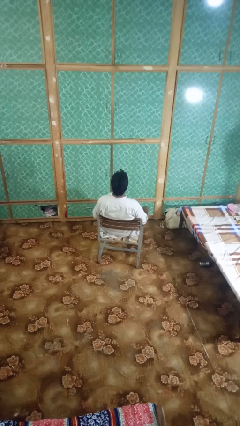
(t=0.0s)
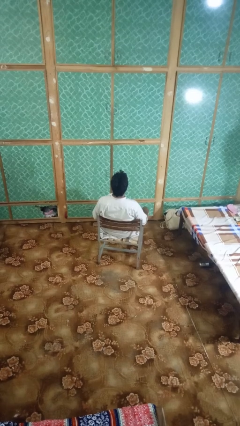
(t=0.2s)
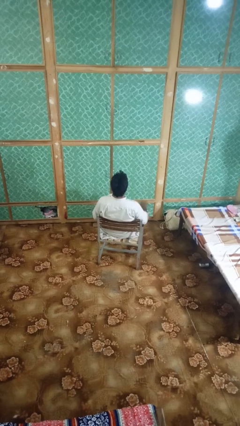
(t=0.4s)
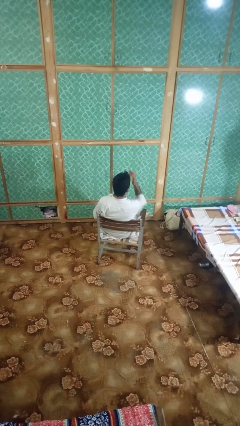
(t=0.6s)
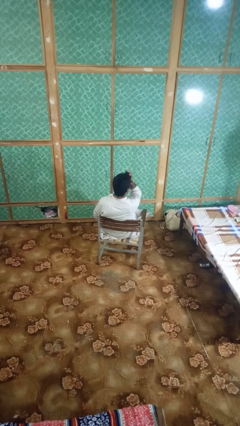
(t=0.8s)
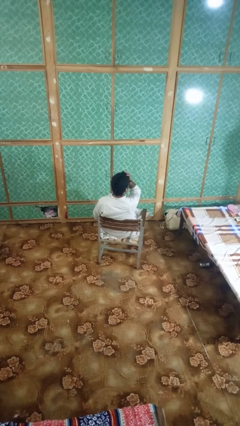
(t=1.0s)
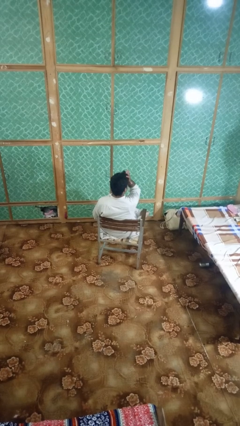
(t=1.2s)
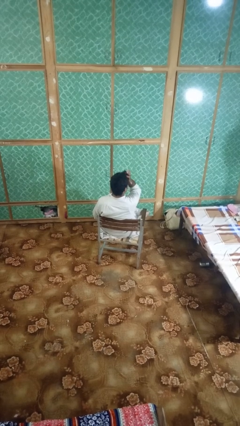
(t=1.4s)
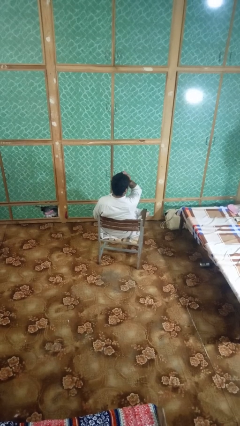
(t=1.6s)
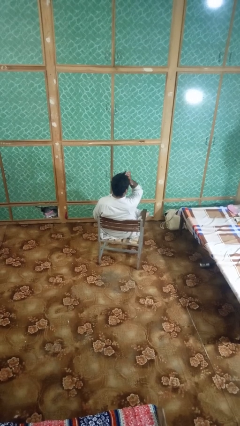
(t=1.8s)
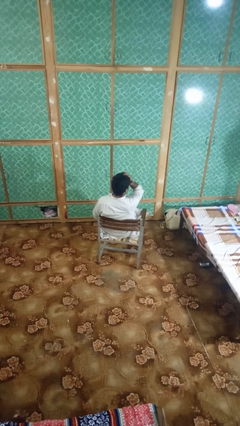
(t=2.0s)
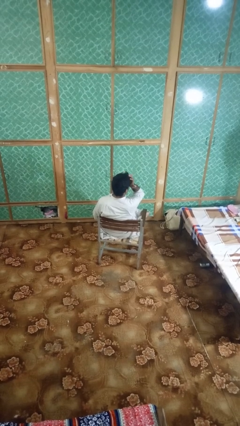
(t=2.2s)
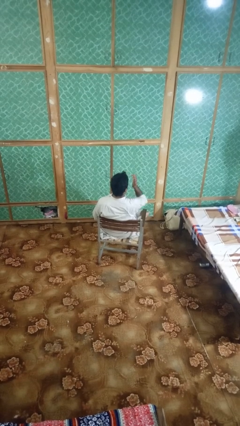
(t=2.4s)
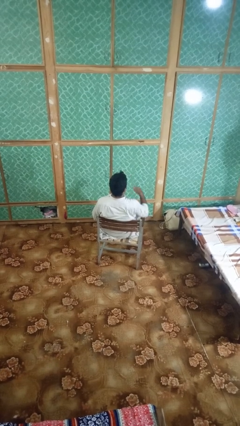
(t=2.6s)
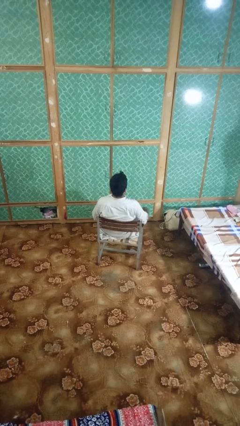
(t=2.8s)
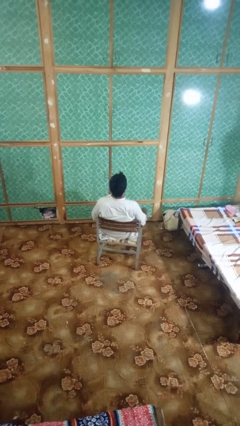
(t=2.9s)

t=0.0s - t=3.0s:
person rubs eyes

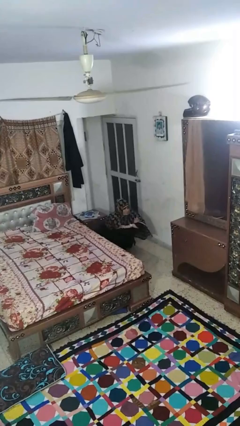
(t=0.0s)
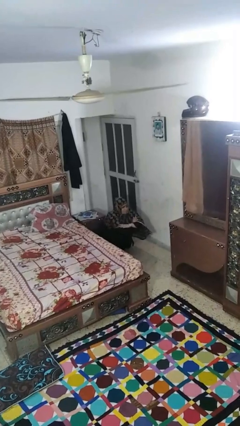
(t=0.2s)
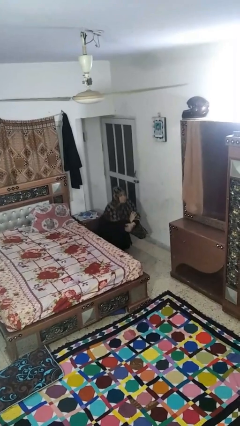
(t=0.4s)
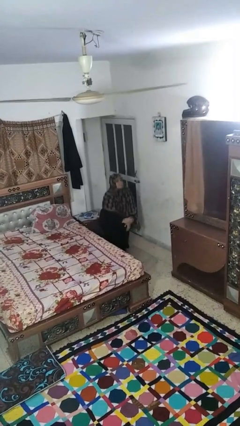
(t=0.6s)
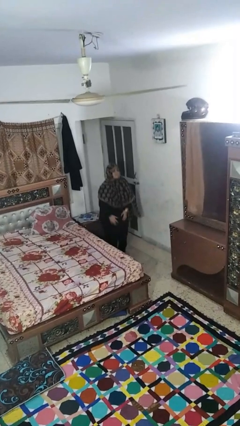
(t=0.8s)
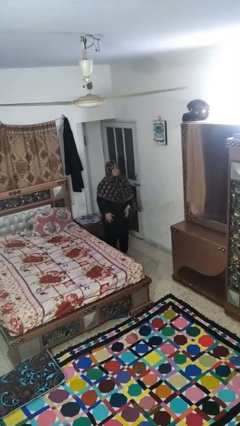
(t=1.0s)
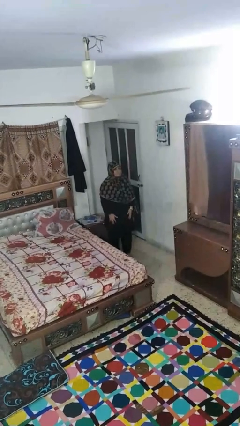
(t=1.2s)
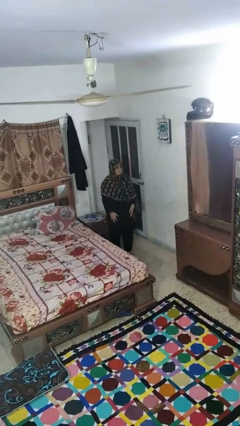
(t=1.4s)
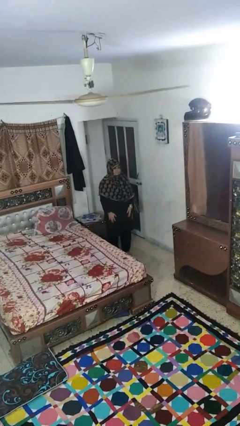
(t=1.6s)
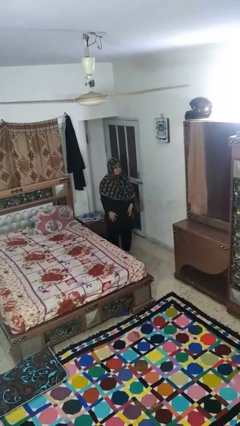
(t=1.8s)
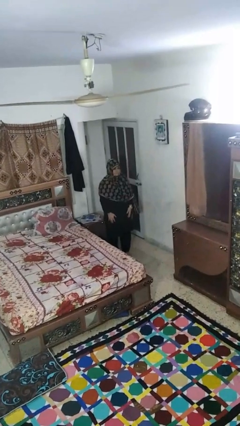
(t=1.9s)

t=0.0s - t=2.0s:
person stands up

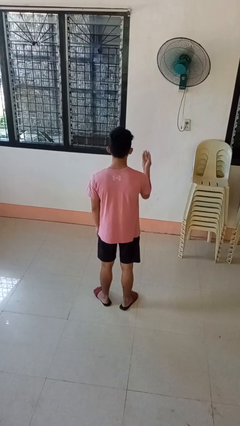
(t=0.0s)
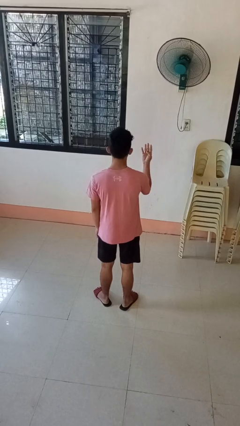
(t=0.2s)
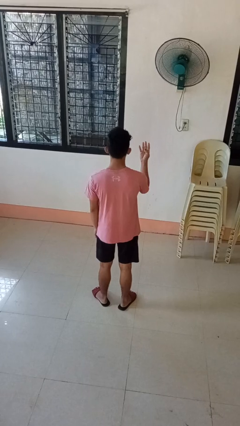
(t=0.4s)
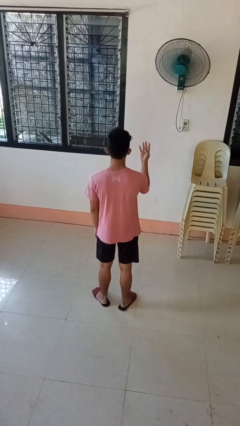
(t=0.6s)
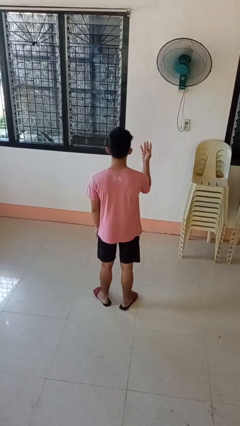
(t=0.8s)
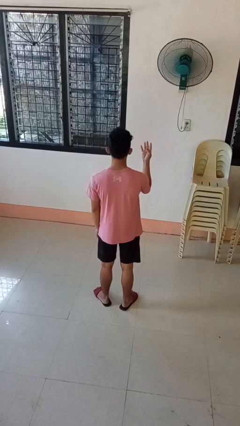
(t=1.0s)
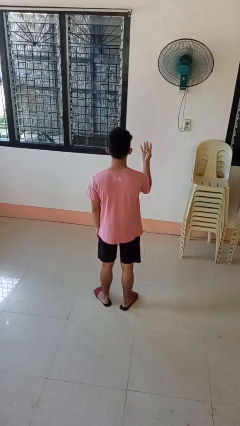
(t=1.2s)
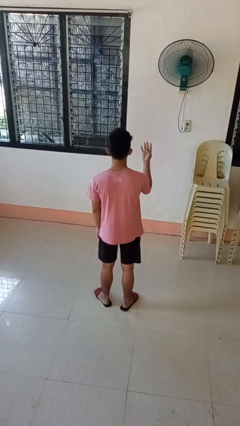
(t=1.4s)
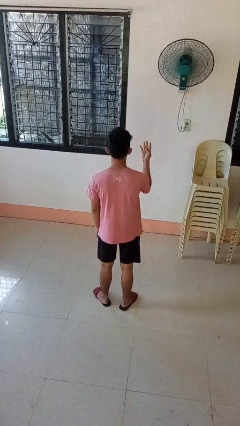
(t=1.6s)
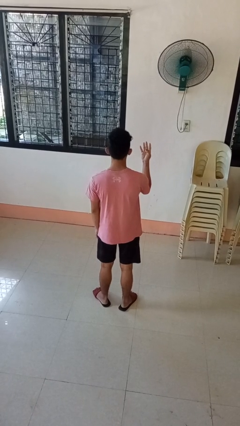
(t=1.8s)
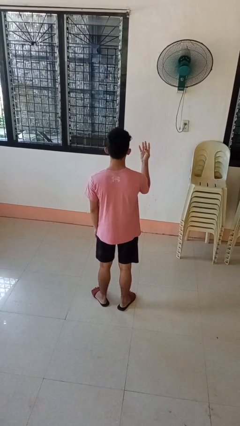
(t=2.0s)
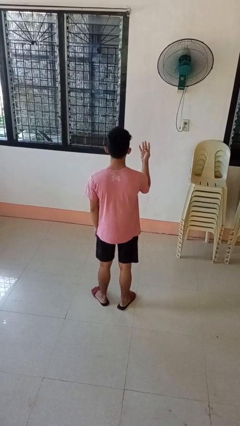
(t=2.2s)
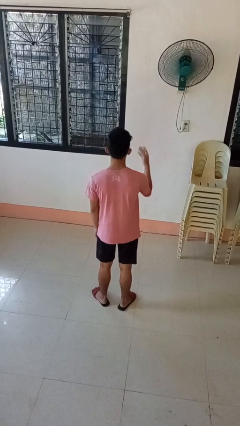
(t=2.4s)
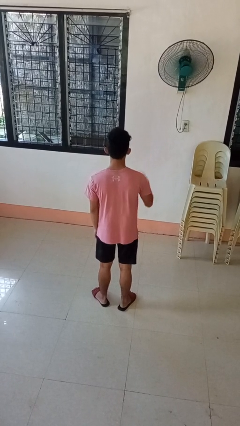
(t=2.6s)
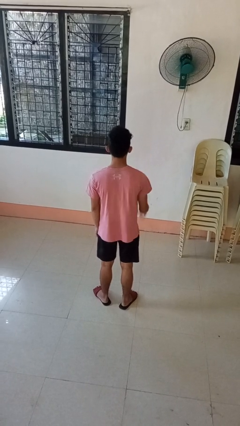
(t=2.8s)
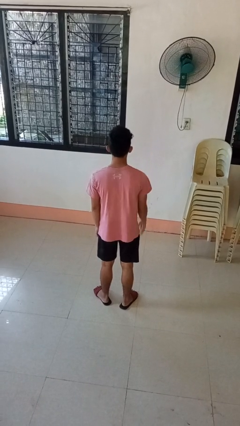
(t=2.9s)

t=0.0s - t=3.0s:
person gestures number four

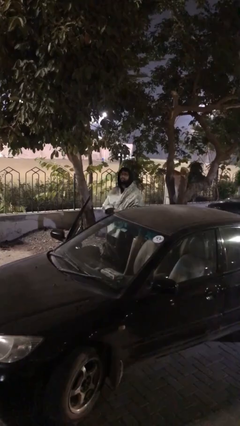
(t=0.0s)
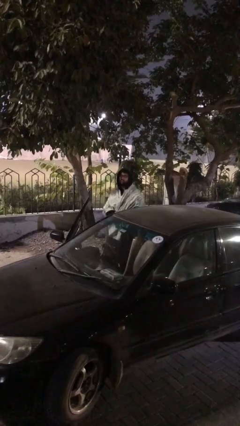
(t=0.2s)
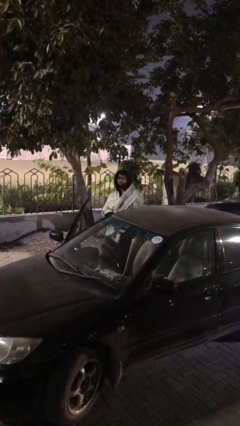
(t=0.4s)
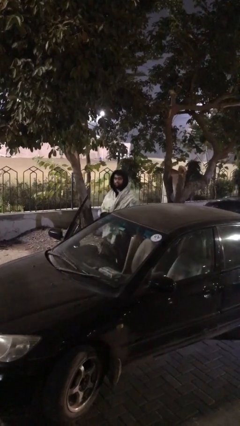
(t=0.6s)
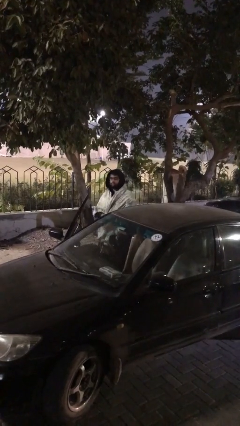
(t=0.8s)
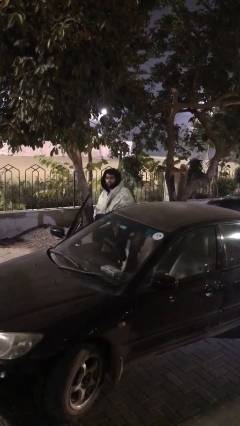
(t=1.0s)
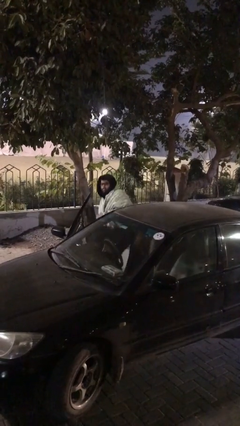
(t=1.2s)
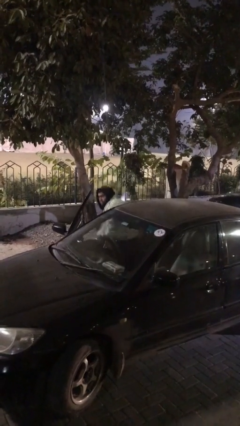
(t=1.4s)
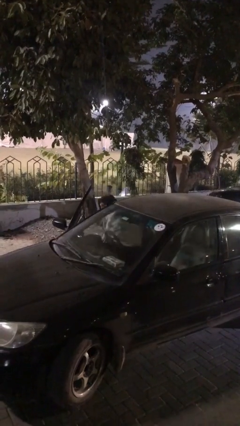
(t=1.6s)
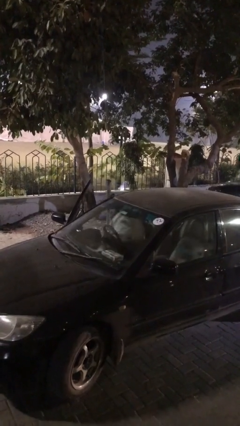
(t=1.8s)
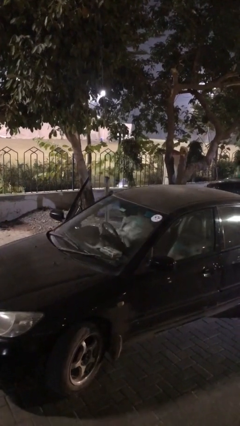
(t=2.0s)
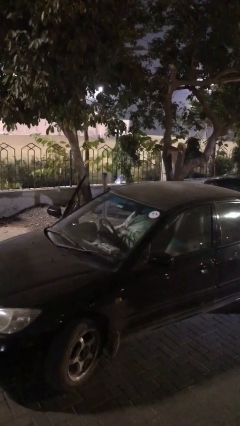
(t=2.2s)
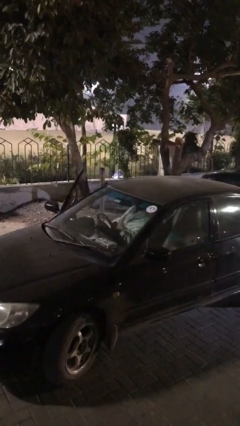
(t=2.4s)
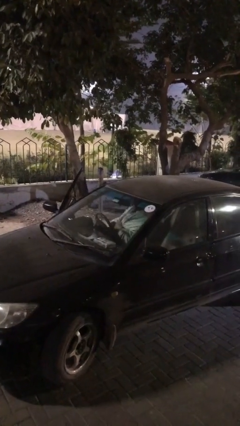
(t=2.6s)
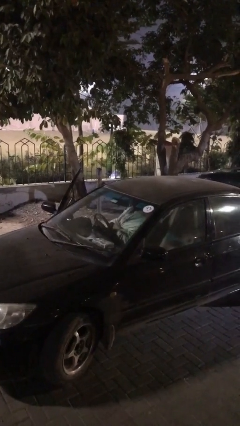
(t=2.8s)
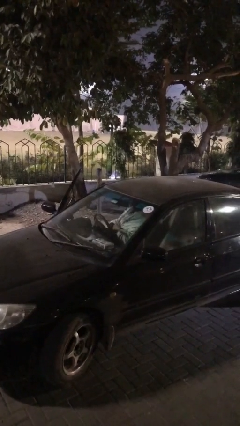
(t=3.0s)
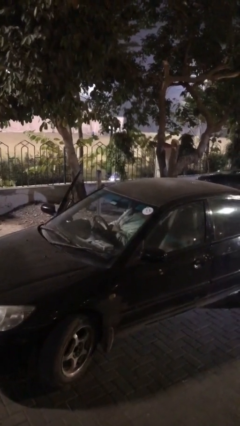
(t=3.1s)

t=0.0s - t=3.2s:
person enters car

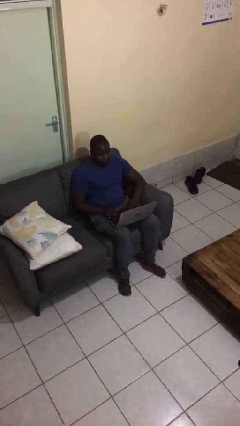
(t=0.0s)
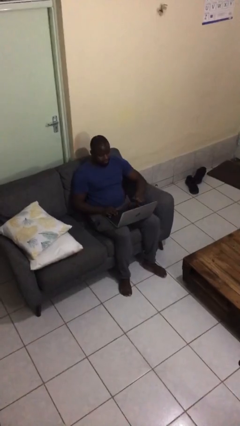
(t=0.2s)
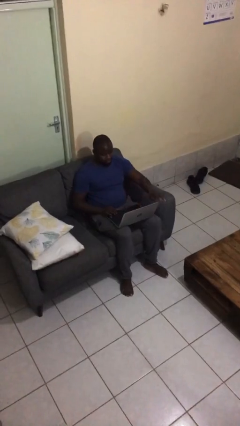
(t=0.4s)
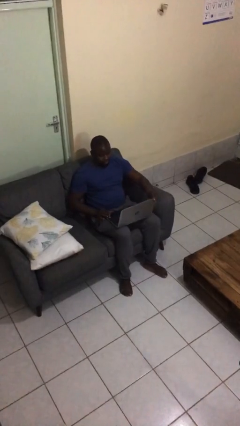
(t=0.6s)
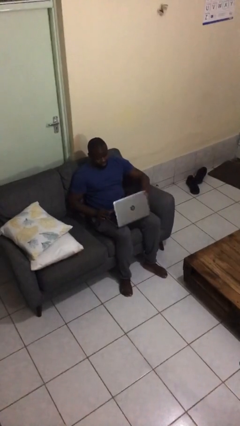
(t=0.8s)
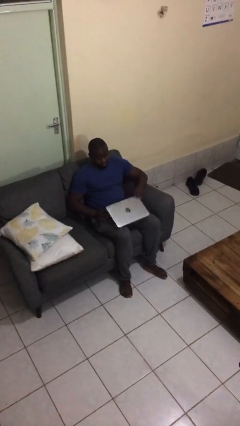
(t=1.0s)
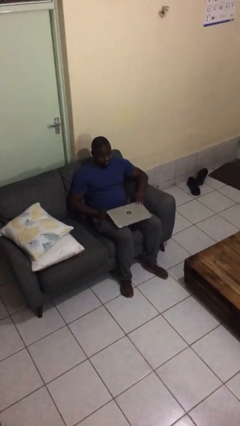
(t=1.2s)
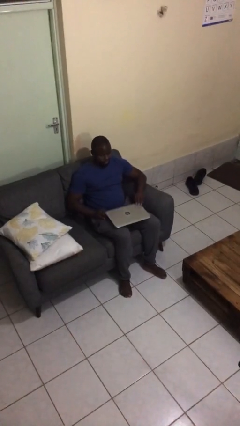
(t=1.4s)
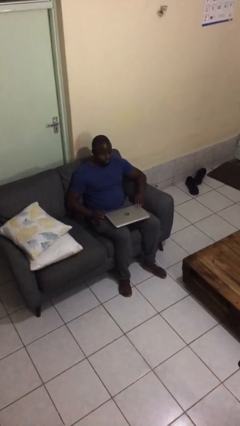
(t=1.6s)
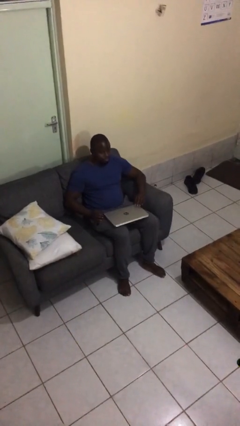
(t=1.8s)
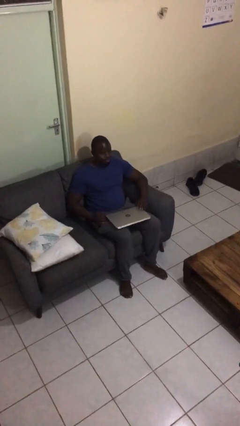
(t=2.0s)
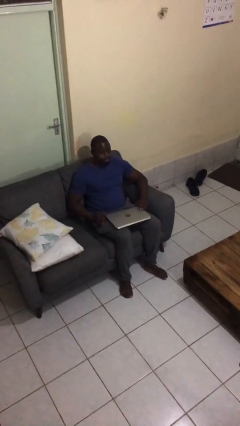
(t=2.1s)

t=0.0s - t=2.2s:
person closes laptop

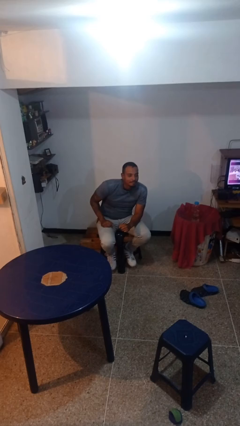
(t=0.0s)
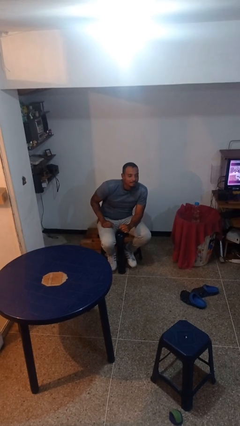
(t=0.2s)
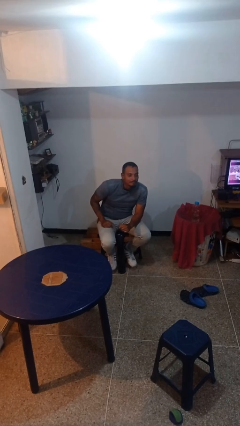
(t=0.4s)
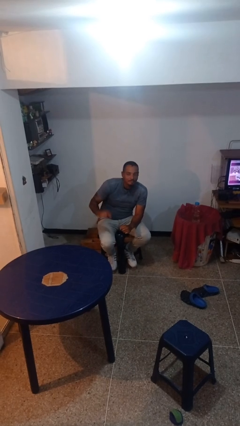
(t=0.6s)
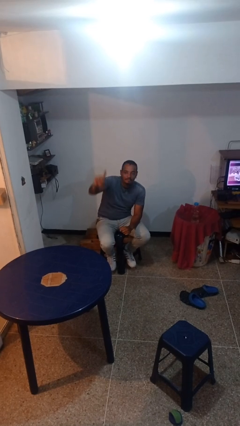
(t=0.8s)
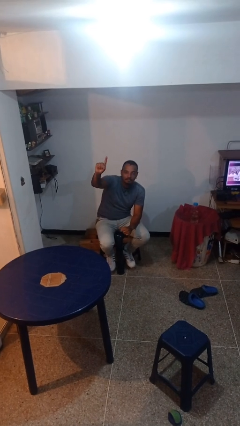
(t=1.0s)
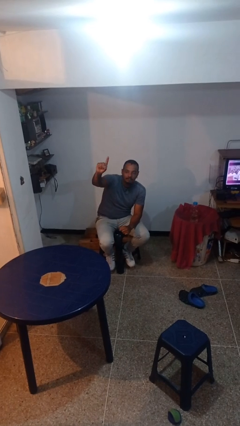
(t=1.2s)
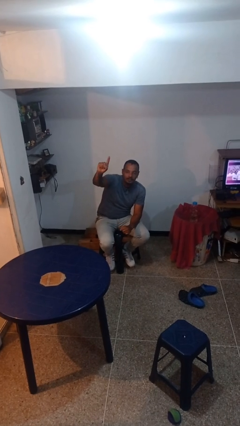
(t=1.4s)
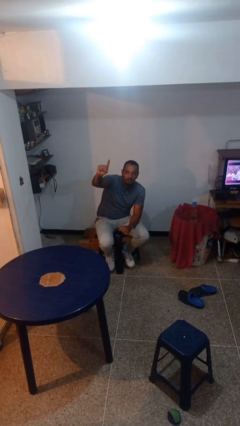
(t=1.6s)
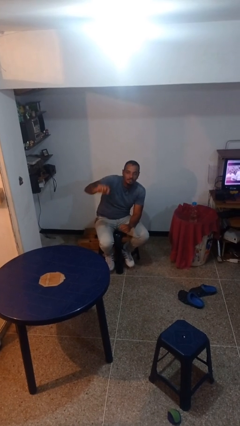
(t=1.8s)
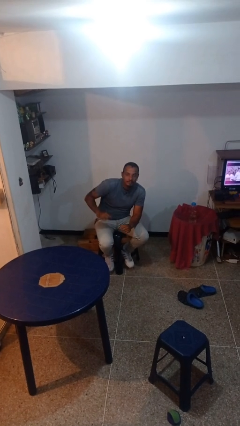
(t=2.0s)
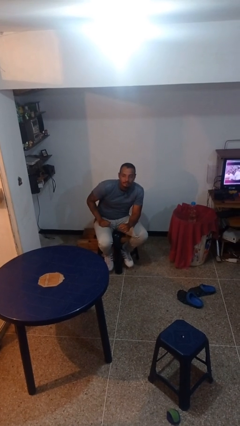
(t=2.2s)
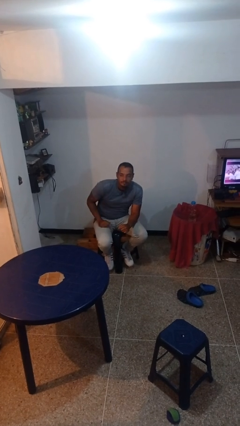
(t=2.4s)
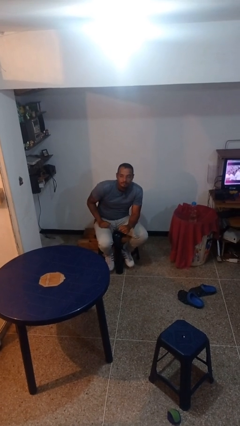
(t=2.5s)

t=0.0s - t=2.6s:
person gestures number one

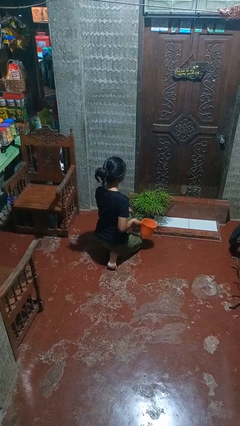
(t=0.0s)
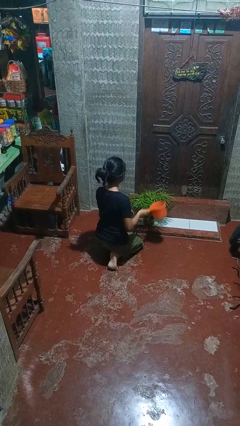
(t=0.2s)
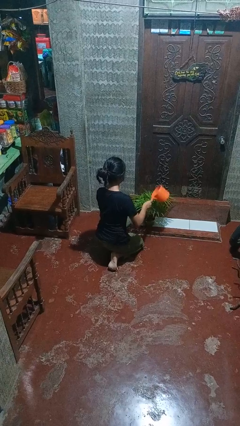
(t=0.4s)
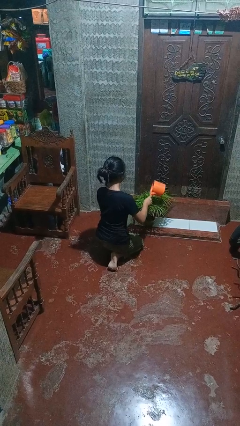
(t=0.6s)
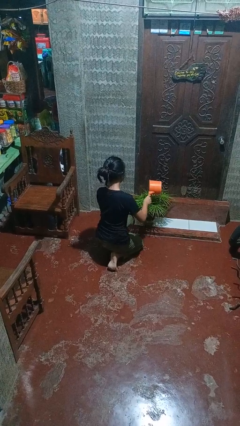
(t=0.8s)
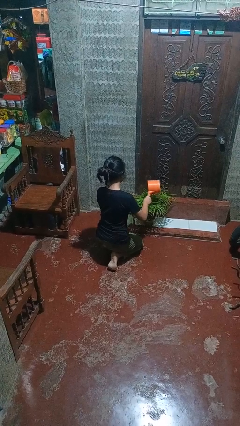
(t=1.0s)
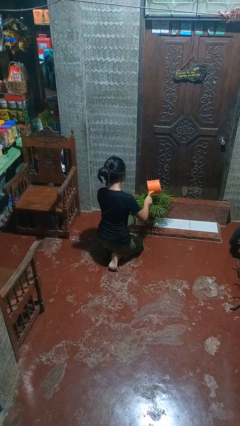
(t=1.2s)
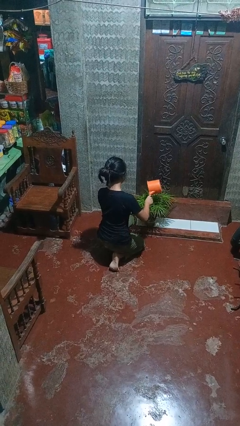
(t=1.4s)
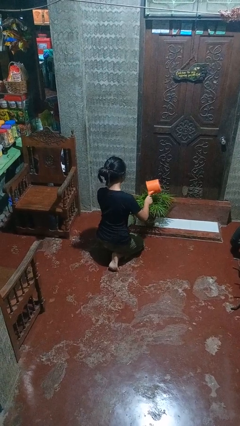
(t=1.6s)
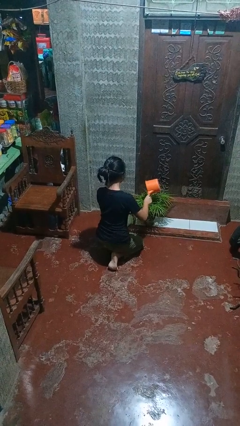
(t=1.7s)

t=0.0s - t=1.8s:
person waters houseplant
